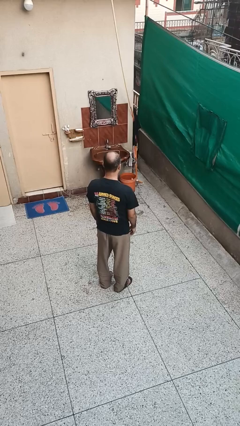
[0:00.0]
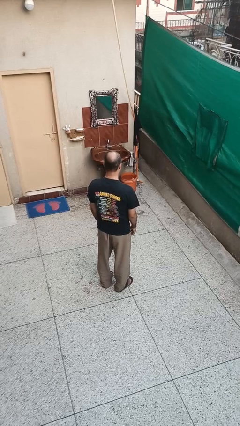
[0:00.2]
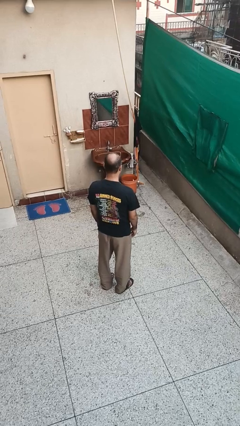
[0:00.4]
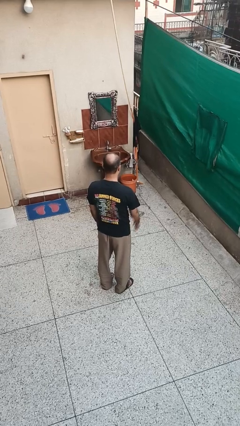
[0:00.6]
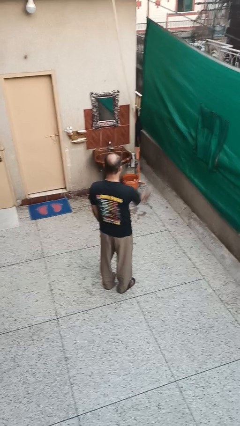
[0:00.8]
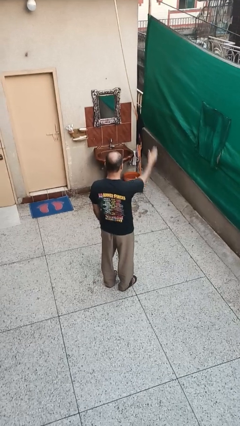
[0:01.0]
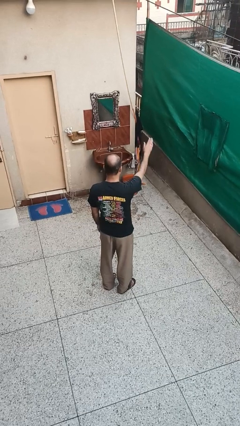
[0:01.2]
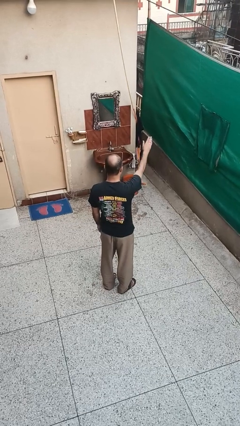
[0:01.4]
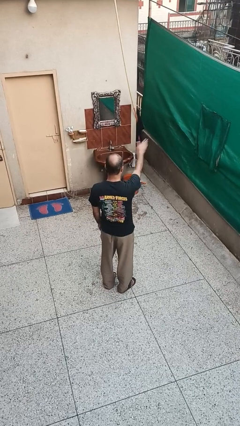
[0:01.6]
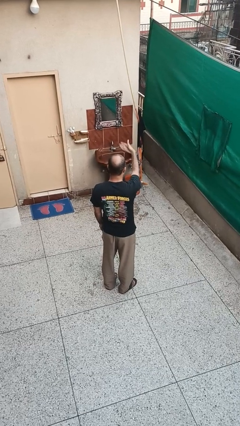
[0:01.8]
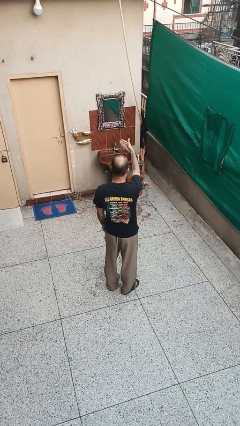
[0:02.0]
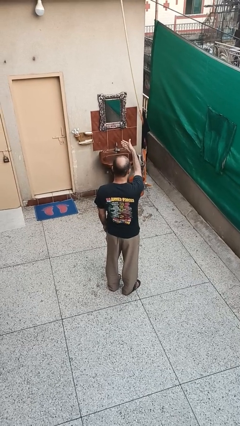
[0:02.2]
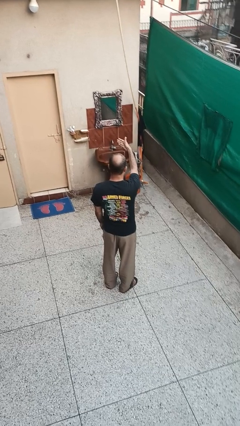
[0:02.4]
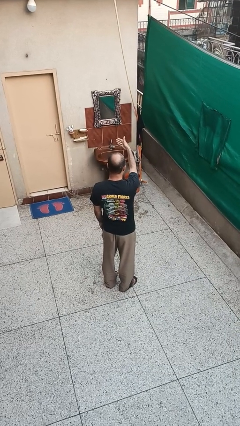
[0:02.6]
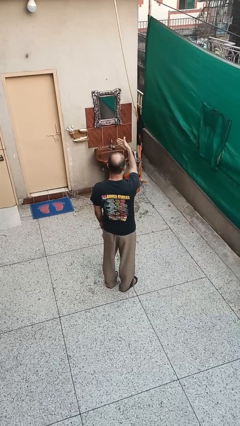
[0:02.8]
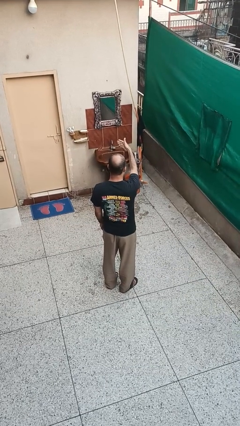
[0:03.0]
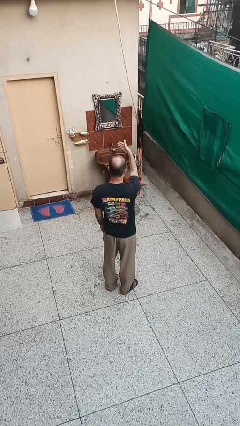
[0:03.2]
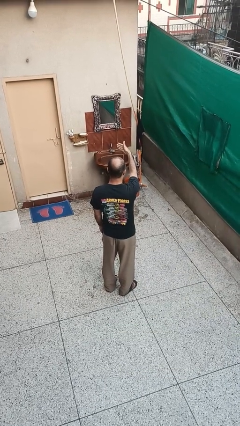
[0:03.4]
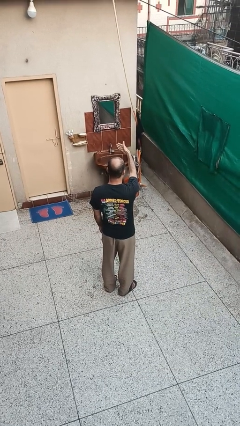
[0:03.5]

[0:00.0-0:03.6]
person gestures swipe left

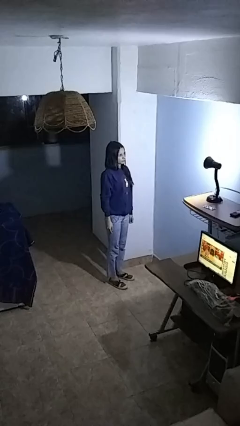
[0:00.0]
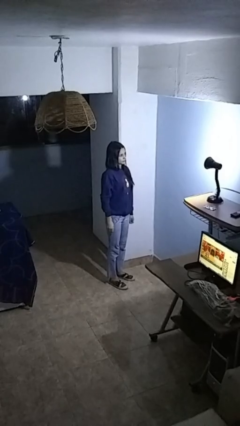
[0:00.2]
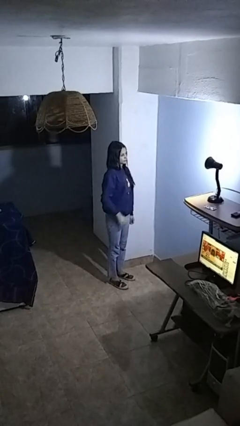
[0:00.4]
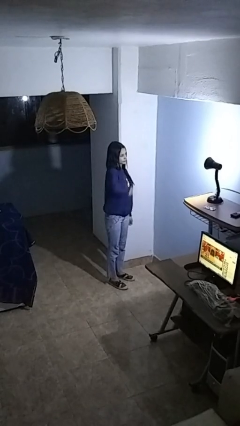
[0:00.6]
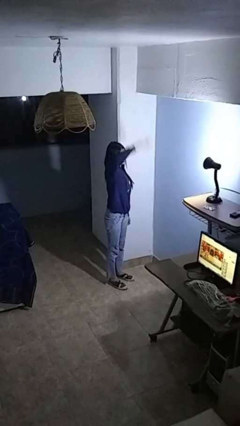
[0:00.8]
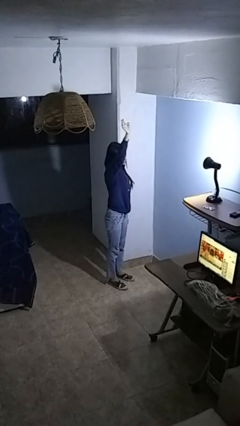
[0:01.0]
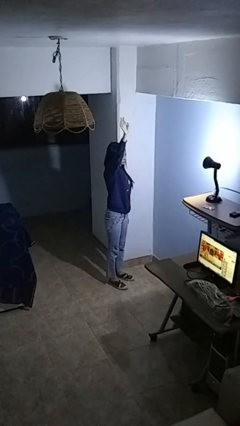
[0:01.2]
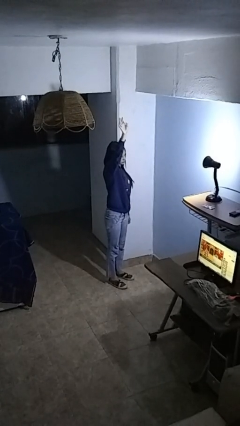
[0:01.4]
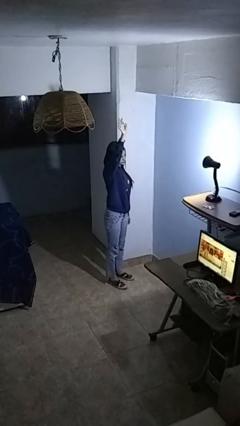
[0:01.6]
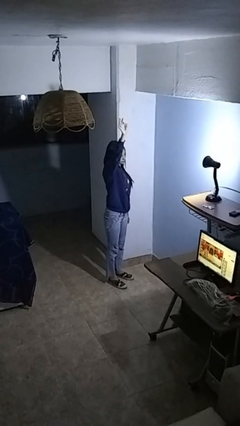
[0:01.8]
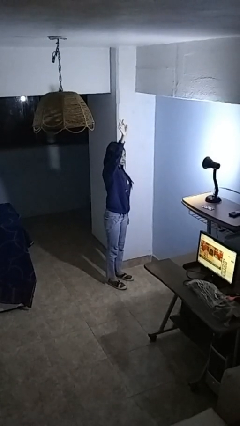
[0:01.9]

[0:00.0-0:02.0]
person gestures swipe up

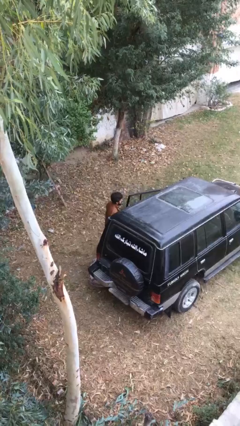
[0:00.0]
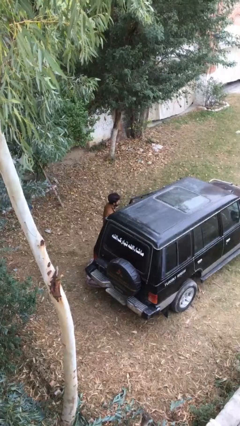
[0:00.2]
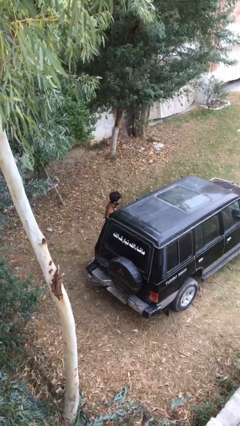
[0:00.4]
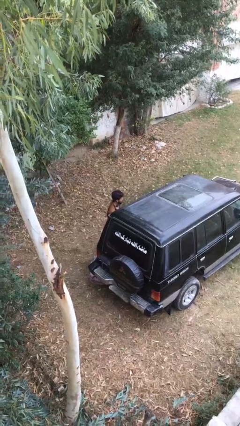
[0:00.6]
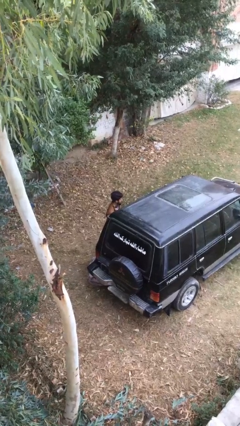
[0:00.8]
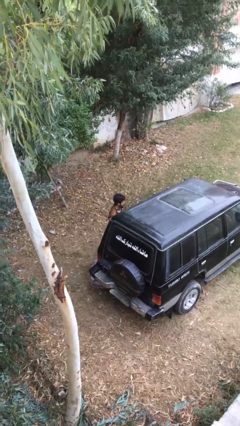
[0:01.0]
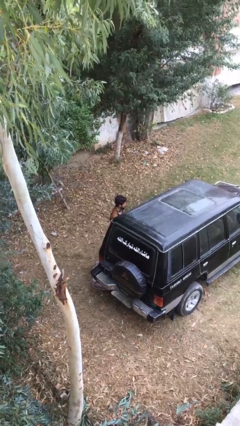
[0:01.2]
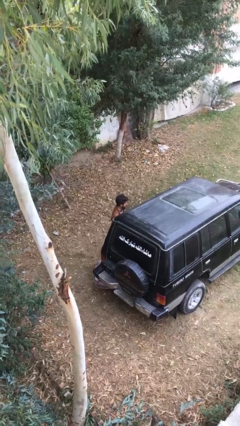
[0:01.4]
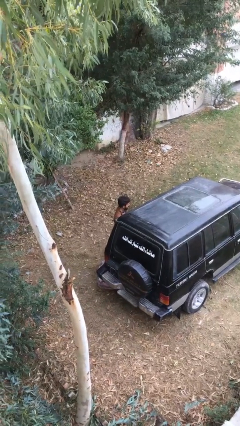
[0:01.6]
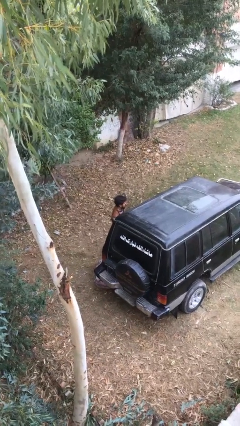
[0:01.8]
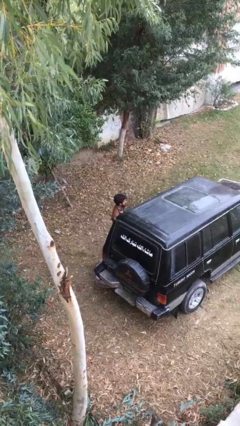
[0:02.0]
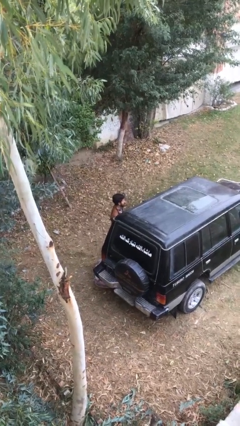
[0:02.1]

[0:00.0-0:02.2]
person closes car door

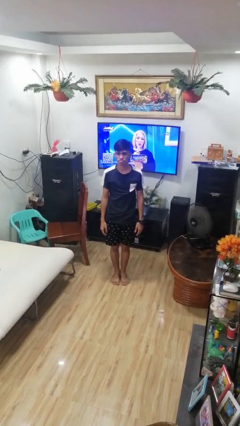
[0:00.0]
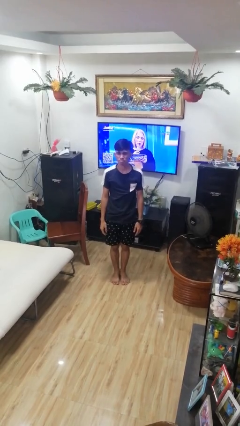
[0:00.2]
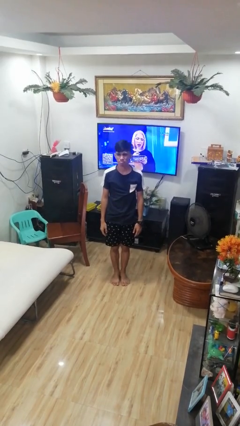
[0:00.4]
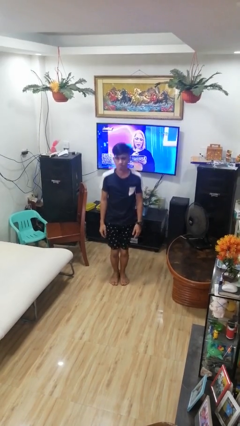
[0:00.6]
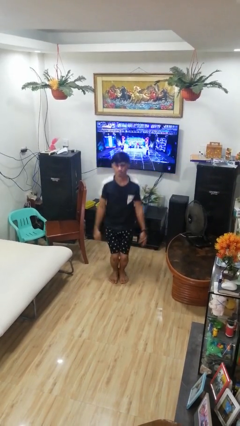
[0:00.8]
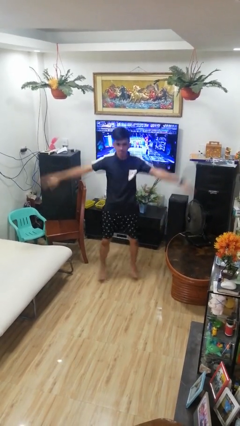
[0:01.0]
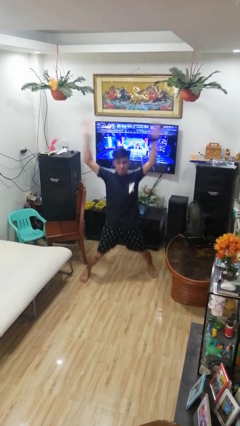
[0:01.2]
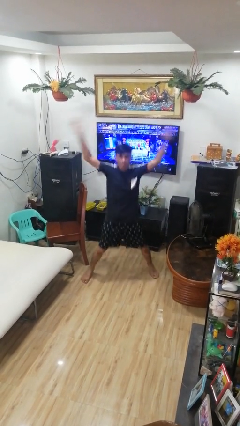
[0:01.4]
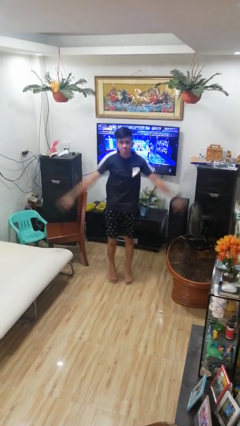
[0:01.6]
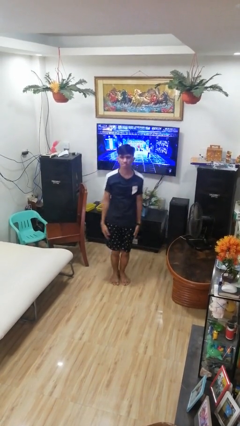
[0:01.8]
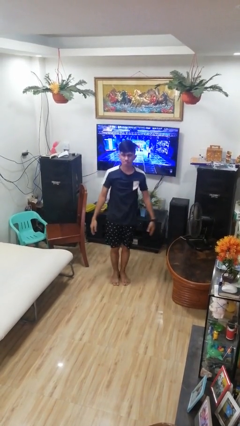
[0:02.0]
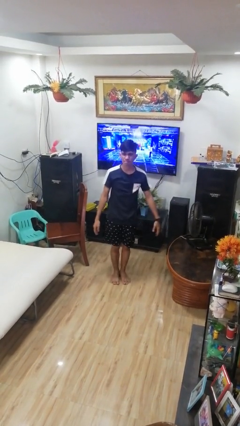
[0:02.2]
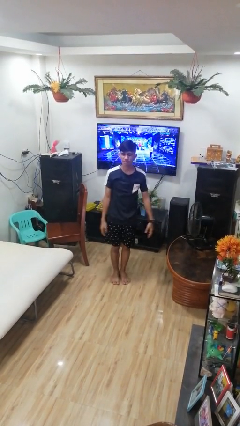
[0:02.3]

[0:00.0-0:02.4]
person exercises with jumping jacks

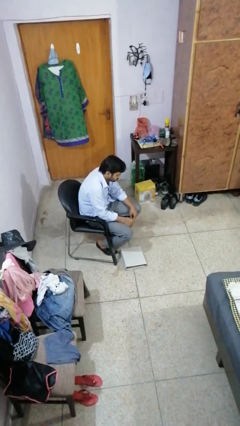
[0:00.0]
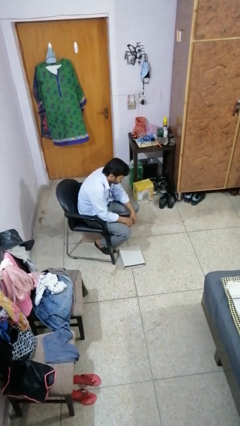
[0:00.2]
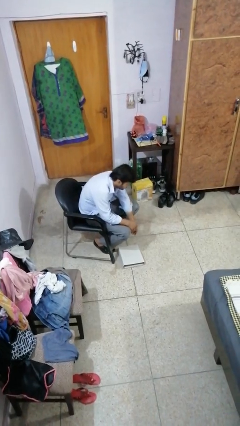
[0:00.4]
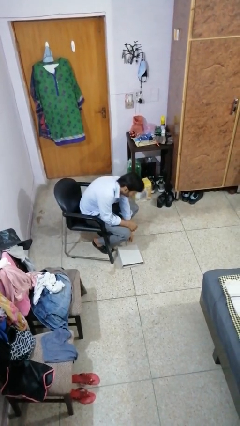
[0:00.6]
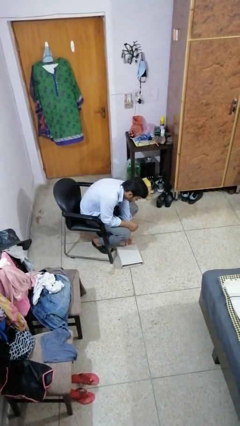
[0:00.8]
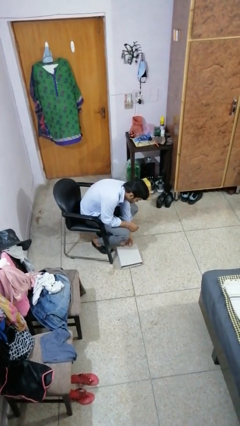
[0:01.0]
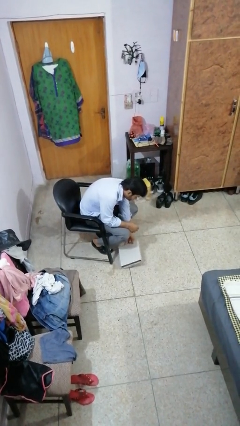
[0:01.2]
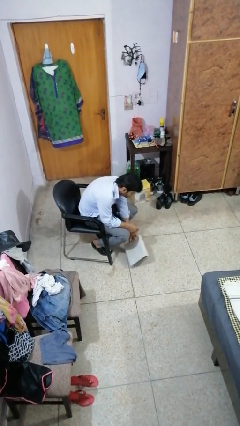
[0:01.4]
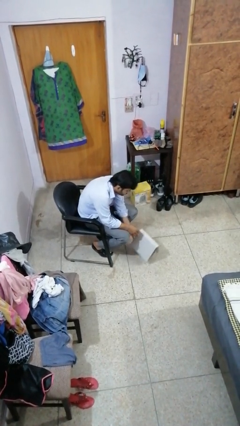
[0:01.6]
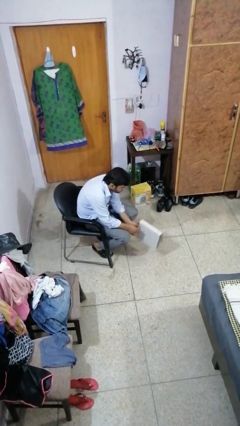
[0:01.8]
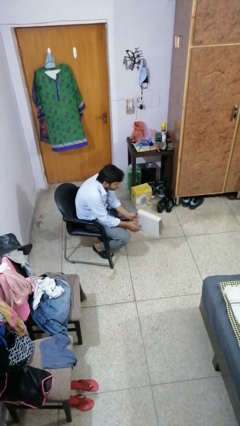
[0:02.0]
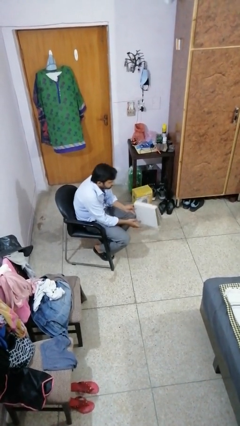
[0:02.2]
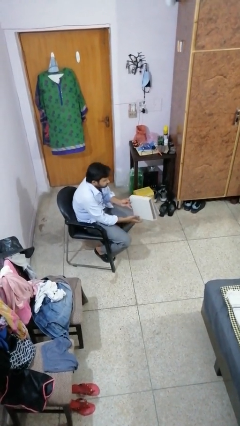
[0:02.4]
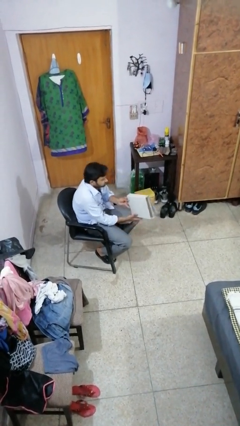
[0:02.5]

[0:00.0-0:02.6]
person picks up object from floor

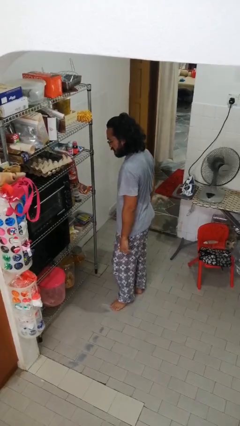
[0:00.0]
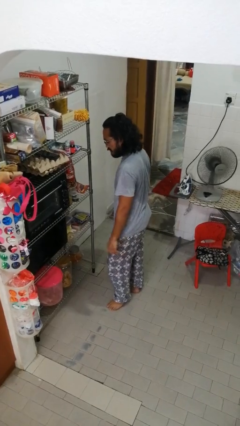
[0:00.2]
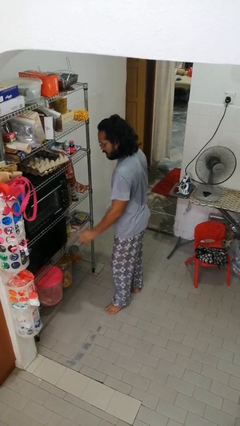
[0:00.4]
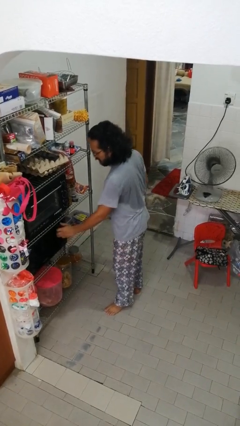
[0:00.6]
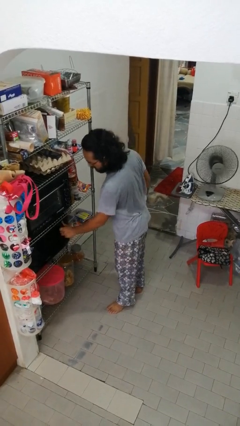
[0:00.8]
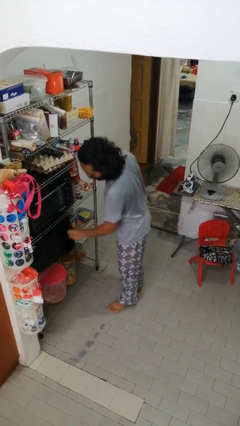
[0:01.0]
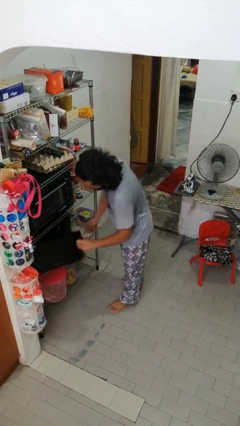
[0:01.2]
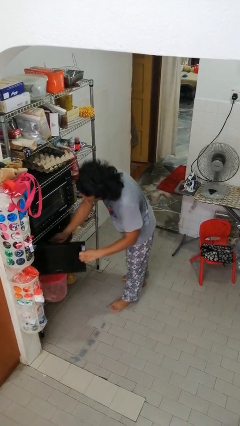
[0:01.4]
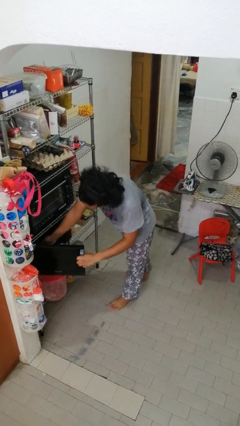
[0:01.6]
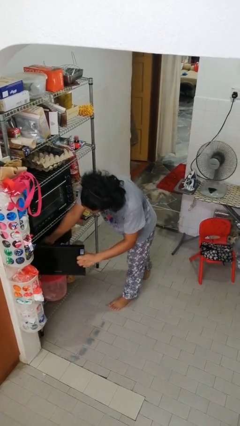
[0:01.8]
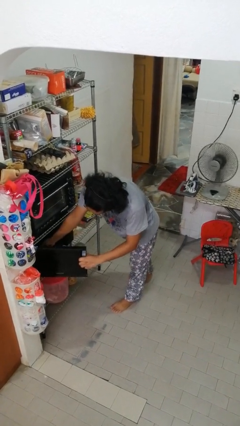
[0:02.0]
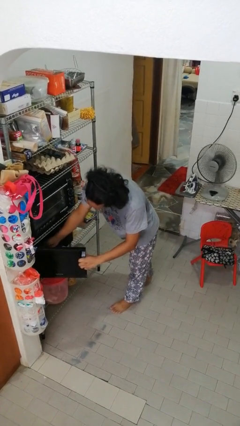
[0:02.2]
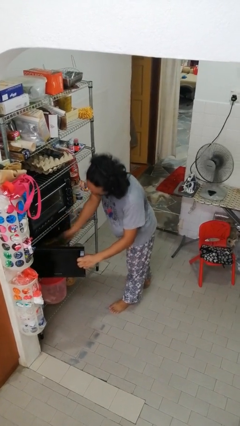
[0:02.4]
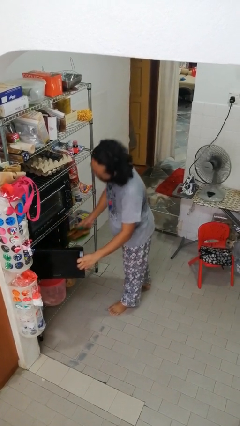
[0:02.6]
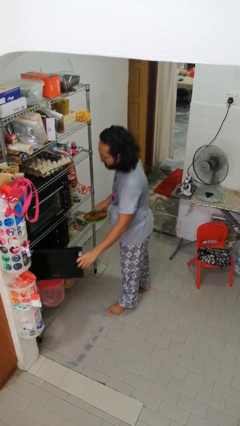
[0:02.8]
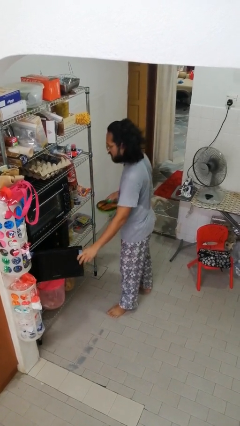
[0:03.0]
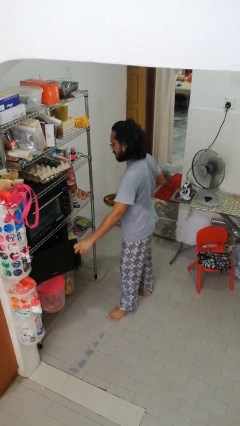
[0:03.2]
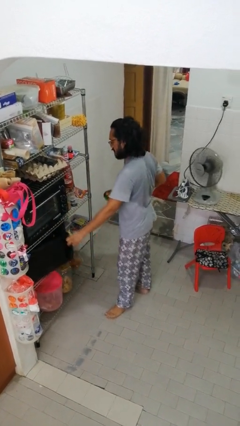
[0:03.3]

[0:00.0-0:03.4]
person takes object from microwave

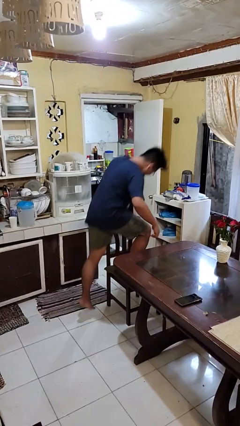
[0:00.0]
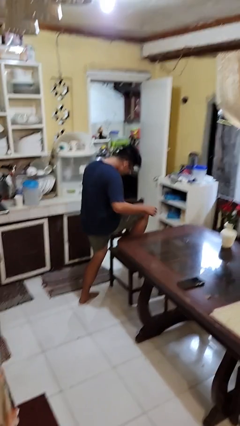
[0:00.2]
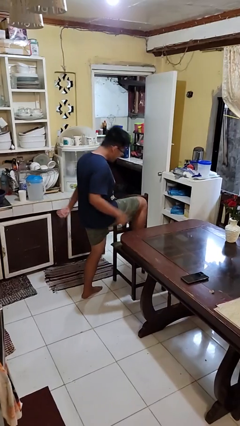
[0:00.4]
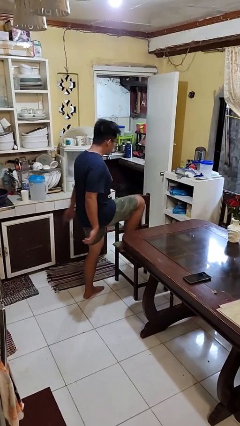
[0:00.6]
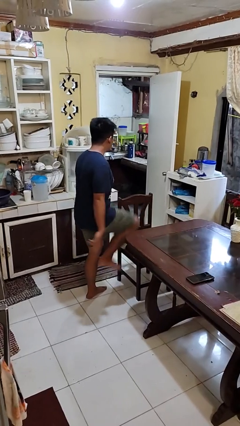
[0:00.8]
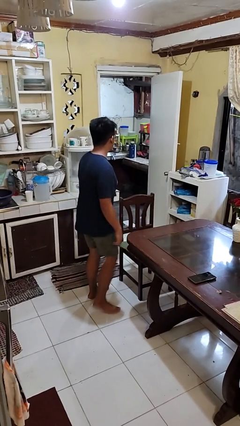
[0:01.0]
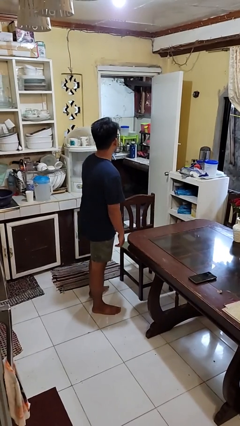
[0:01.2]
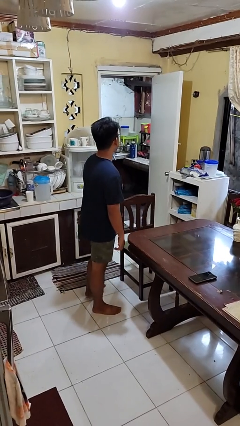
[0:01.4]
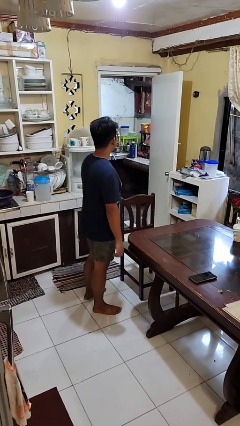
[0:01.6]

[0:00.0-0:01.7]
person climbs off chair
